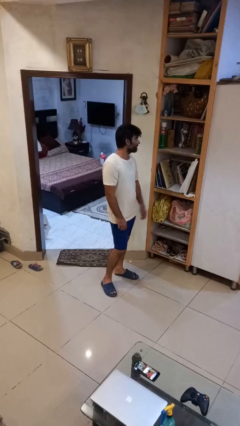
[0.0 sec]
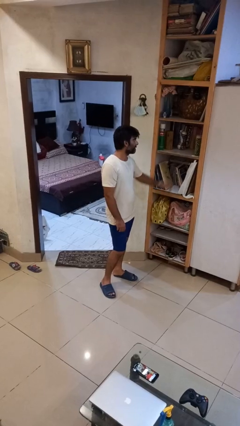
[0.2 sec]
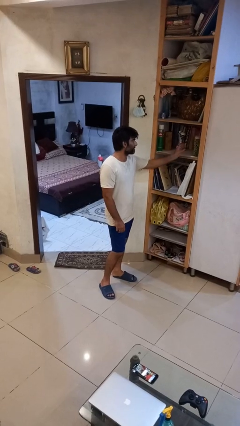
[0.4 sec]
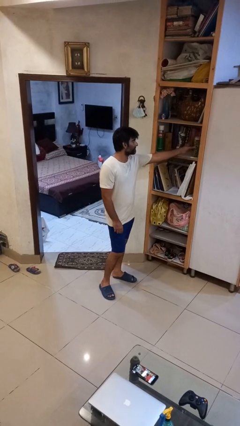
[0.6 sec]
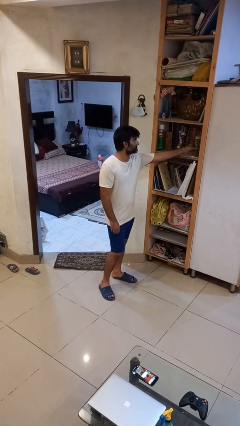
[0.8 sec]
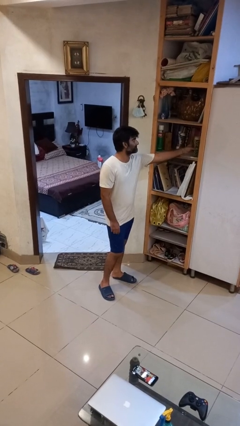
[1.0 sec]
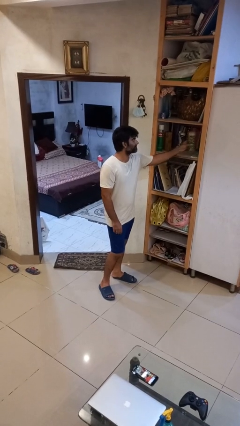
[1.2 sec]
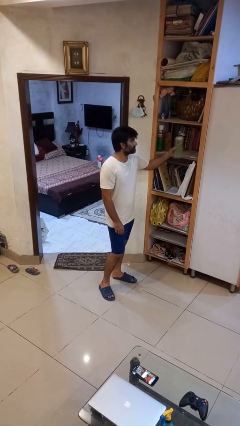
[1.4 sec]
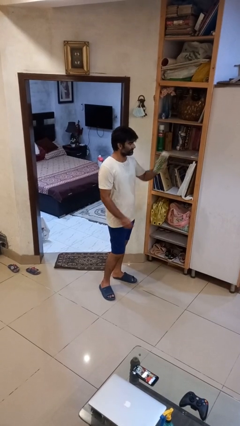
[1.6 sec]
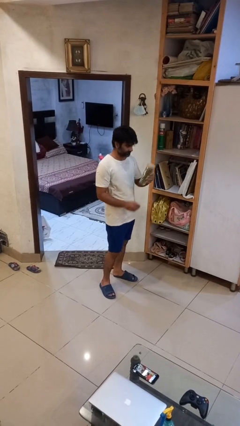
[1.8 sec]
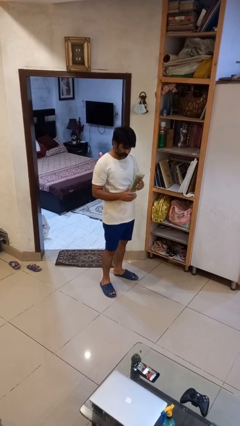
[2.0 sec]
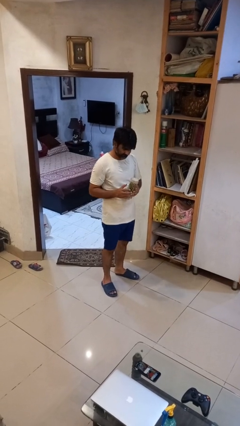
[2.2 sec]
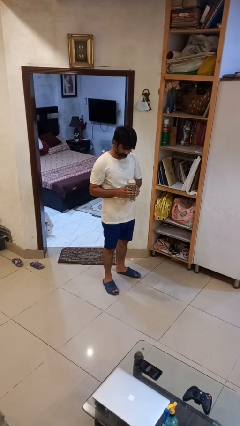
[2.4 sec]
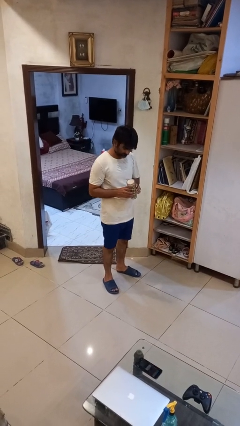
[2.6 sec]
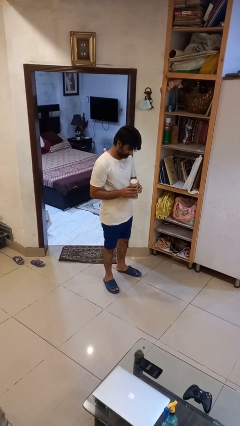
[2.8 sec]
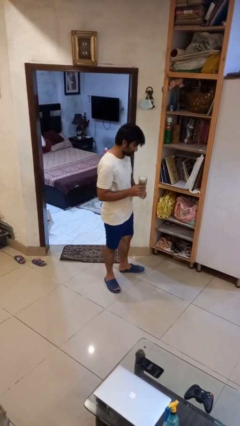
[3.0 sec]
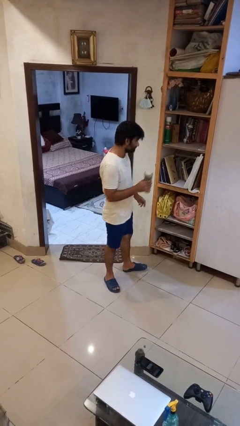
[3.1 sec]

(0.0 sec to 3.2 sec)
person picks up object from cabinet

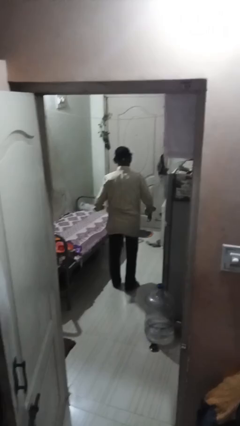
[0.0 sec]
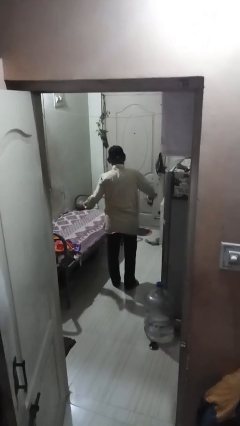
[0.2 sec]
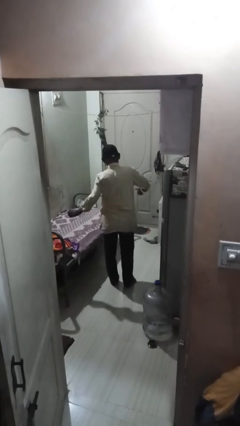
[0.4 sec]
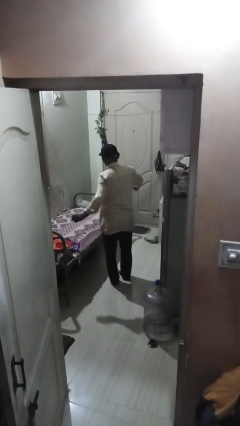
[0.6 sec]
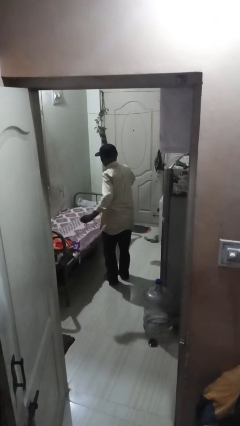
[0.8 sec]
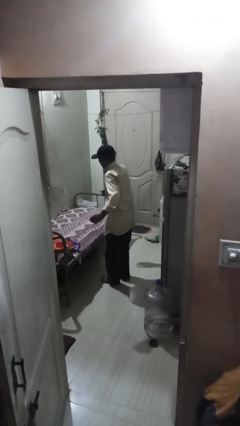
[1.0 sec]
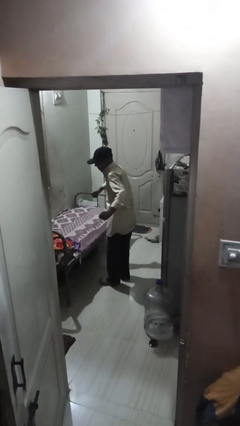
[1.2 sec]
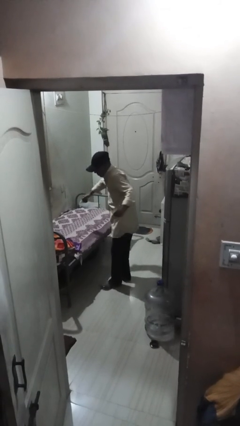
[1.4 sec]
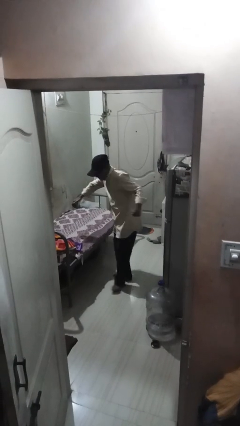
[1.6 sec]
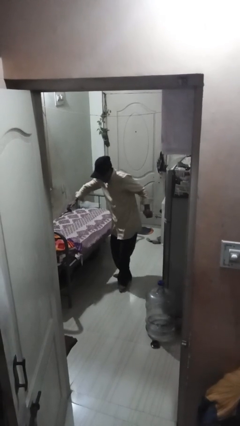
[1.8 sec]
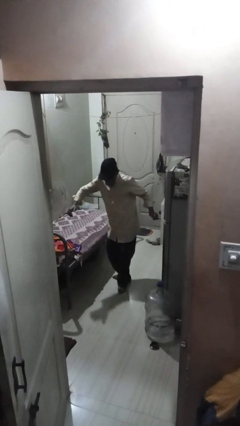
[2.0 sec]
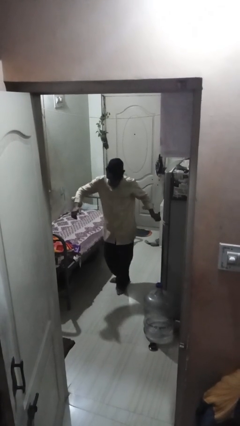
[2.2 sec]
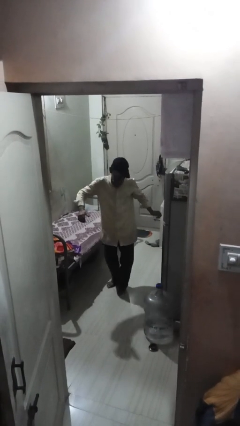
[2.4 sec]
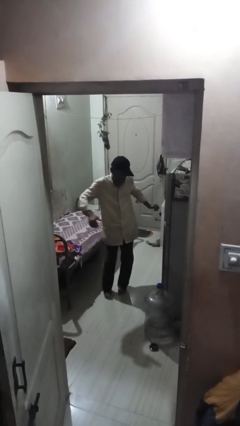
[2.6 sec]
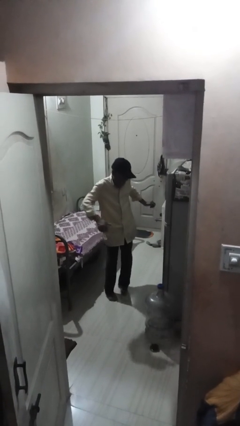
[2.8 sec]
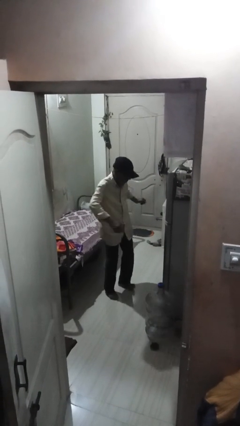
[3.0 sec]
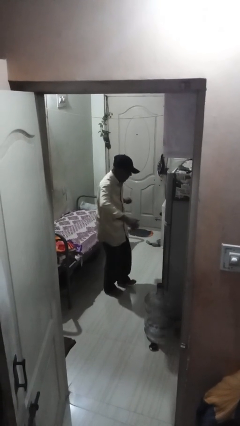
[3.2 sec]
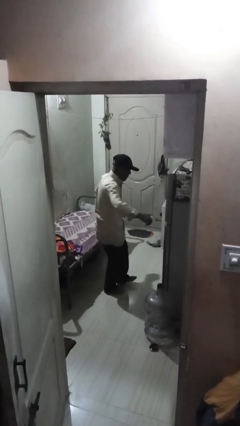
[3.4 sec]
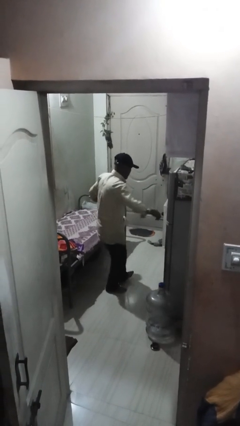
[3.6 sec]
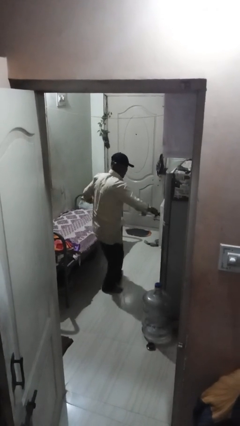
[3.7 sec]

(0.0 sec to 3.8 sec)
person twirls

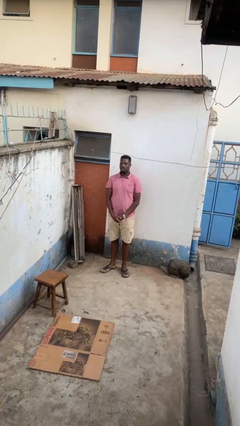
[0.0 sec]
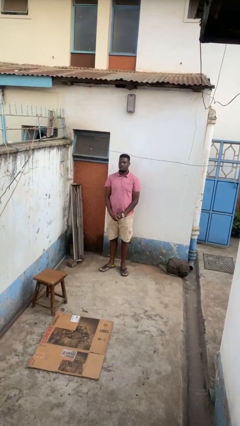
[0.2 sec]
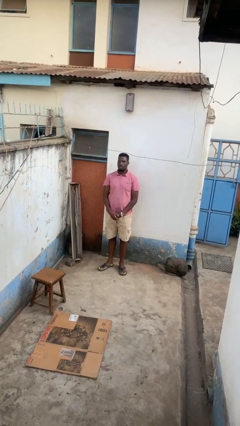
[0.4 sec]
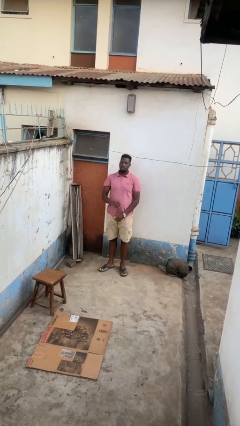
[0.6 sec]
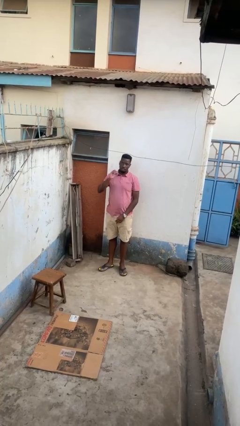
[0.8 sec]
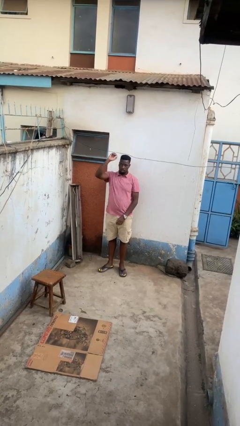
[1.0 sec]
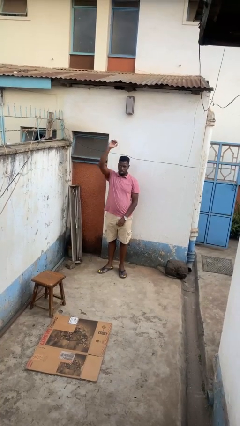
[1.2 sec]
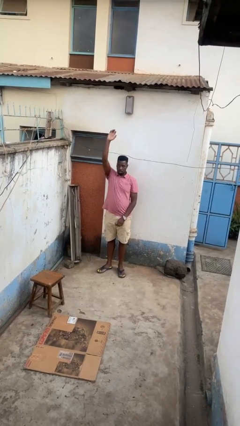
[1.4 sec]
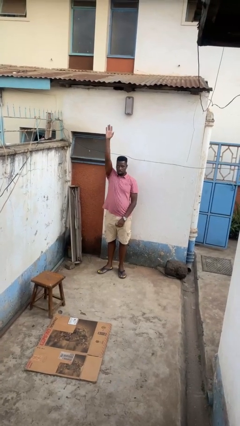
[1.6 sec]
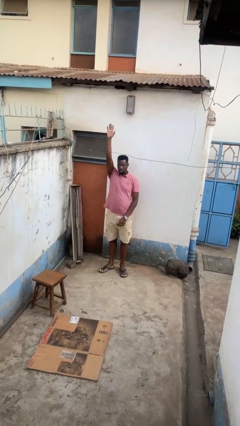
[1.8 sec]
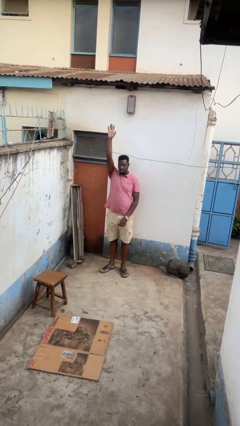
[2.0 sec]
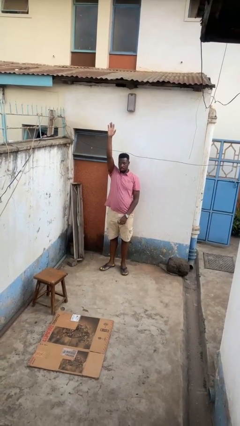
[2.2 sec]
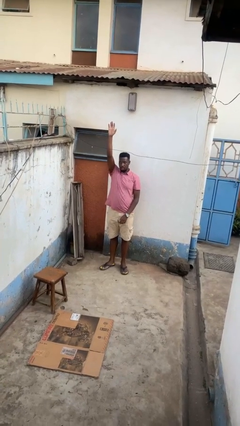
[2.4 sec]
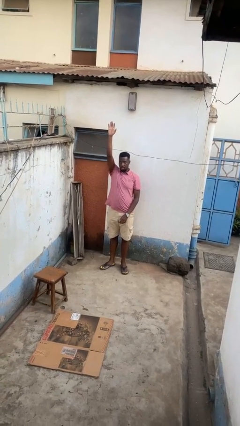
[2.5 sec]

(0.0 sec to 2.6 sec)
person gestures raise hand

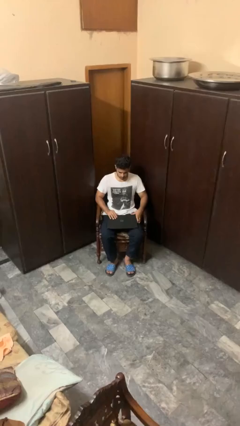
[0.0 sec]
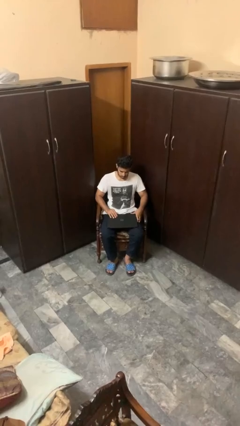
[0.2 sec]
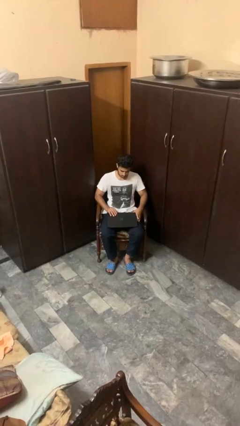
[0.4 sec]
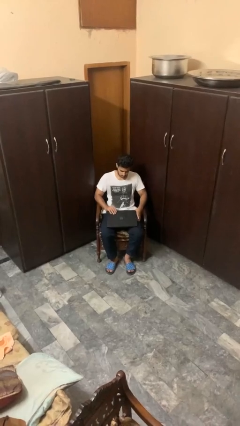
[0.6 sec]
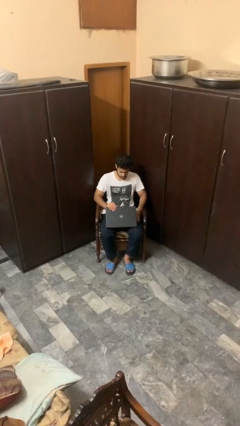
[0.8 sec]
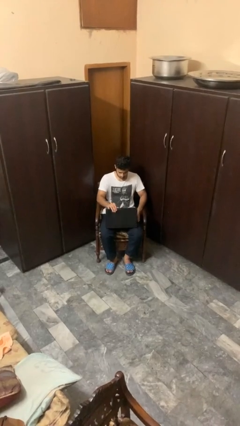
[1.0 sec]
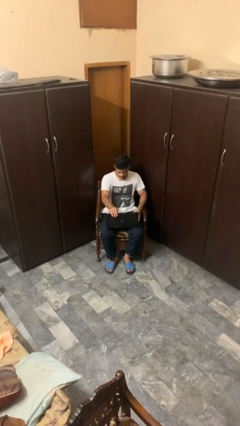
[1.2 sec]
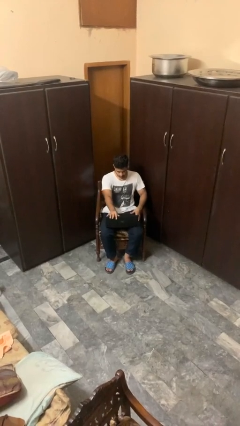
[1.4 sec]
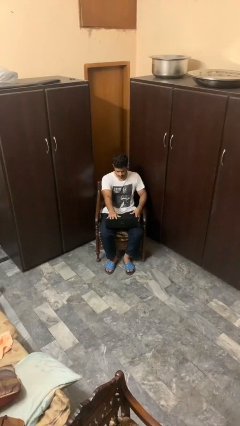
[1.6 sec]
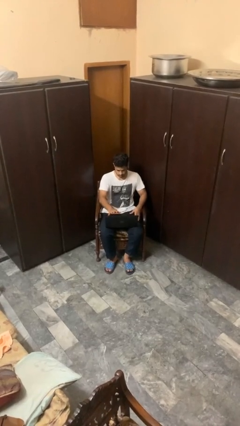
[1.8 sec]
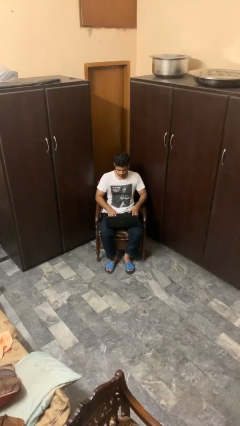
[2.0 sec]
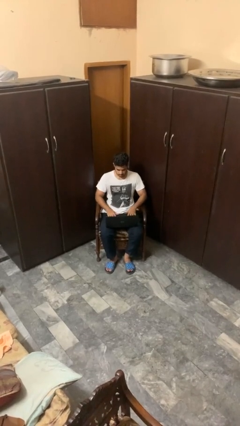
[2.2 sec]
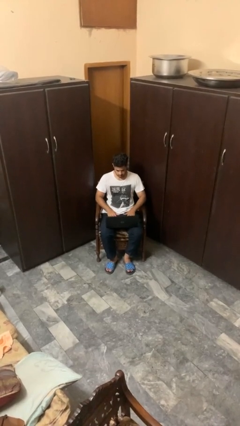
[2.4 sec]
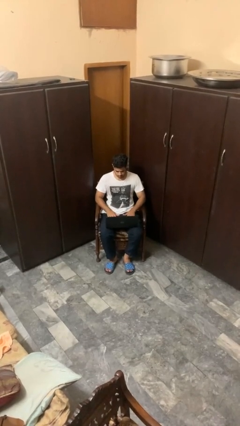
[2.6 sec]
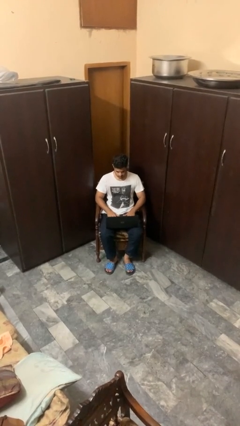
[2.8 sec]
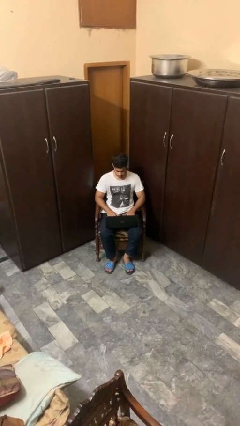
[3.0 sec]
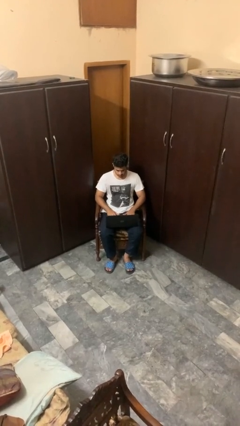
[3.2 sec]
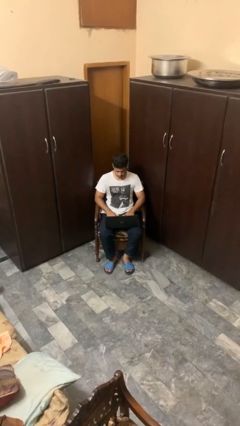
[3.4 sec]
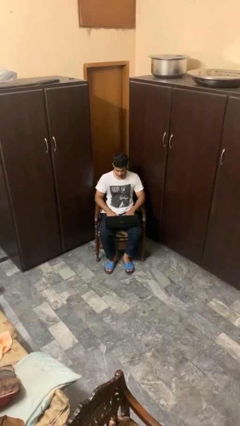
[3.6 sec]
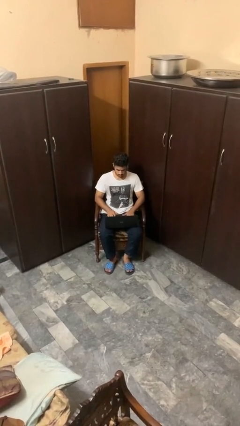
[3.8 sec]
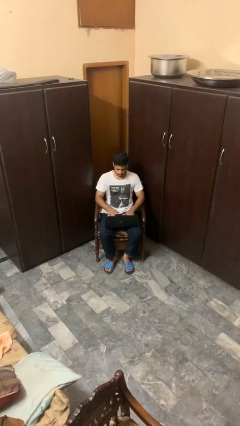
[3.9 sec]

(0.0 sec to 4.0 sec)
person opens laptop

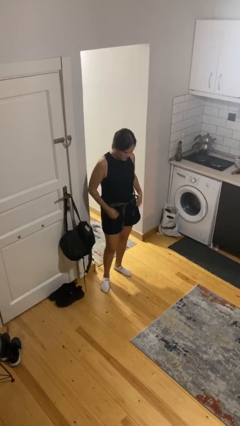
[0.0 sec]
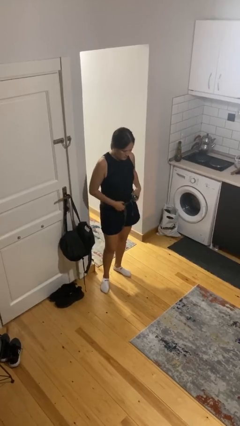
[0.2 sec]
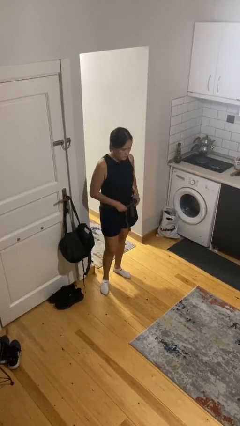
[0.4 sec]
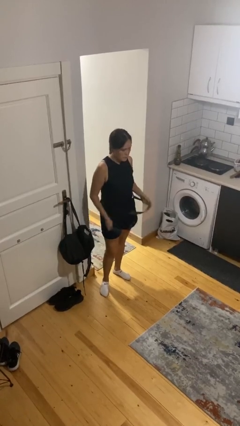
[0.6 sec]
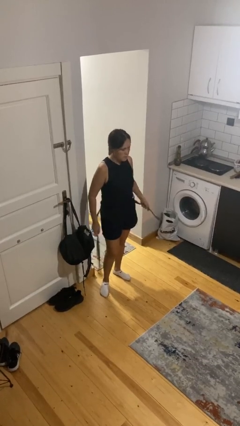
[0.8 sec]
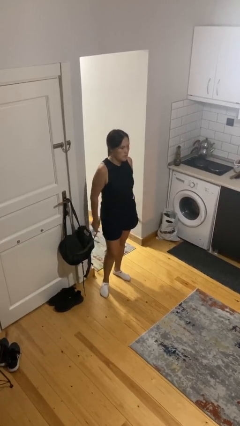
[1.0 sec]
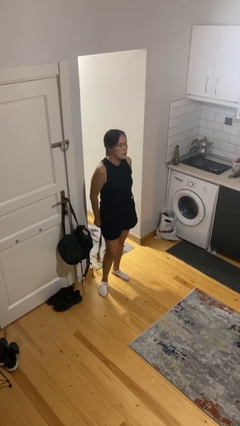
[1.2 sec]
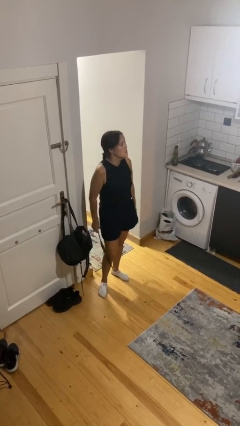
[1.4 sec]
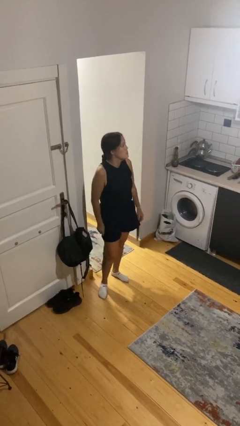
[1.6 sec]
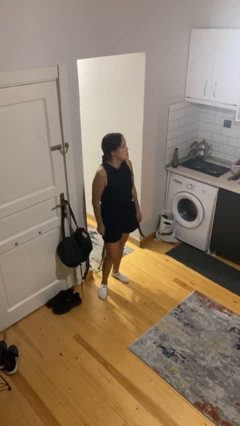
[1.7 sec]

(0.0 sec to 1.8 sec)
person takes off belt

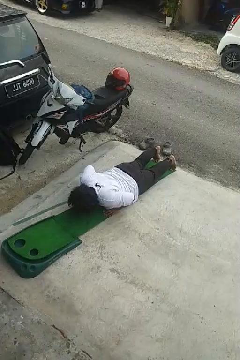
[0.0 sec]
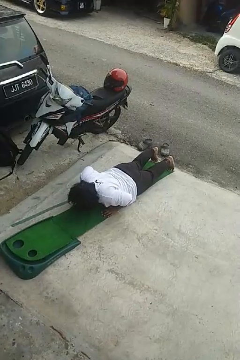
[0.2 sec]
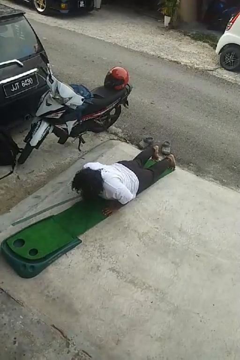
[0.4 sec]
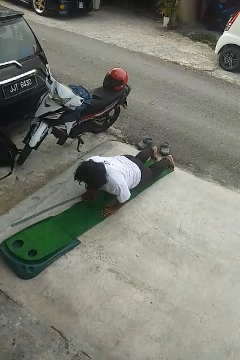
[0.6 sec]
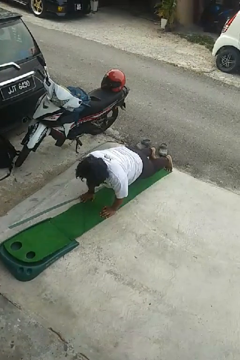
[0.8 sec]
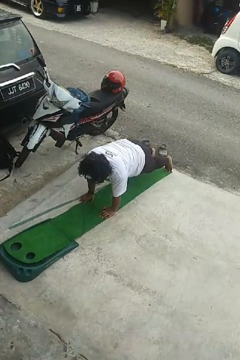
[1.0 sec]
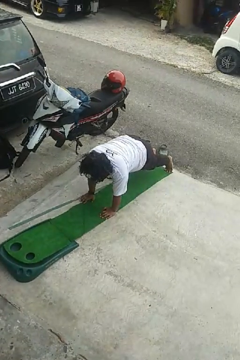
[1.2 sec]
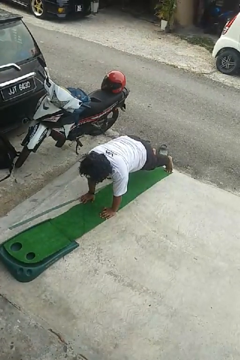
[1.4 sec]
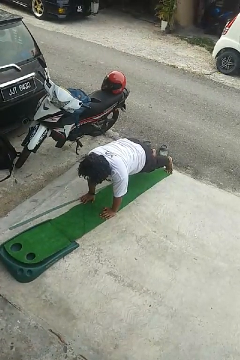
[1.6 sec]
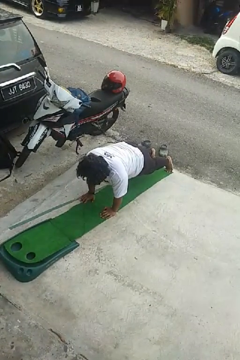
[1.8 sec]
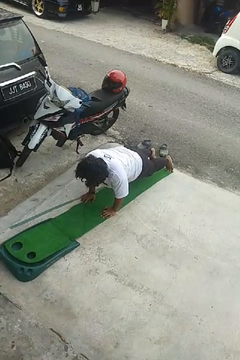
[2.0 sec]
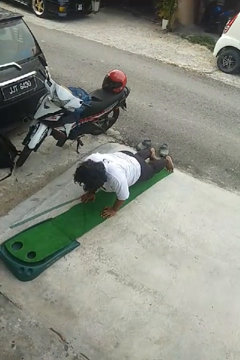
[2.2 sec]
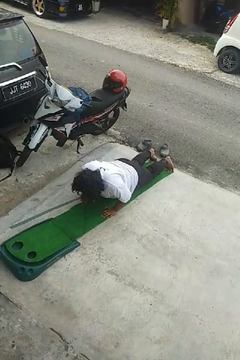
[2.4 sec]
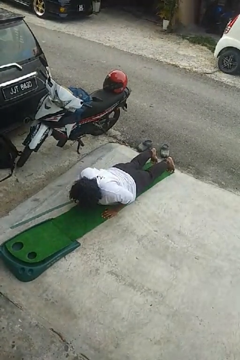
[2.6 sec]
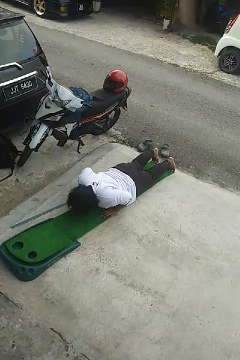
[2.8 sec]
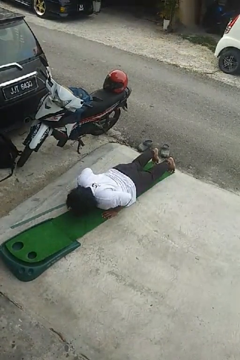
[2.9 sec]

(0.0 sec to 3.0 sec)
person exercises with pushup
